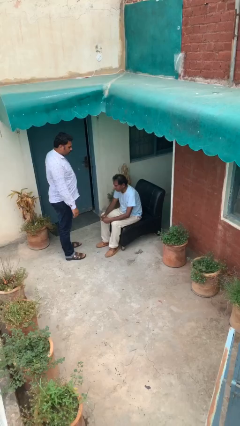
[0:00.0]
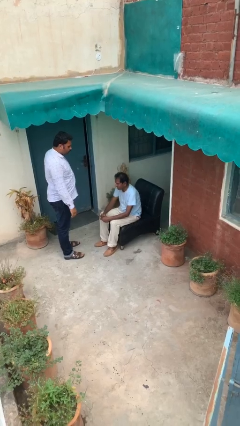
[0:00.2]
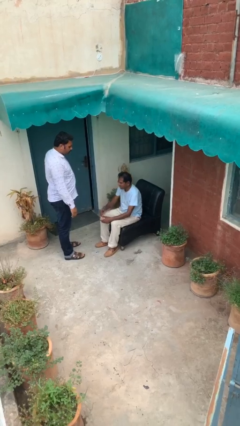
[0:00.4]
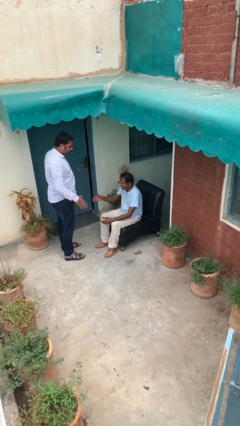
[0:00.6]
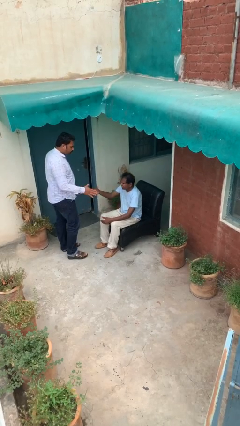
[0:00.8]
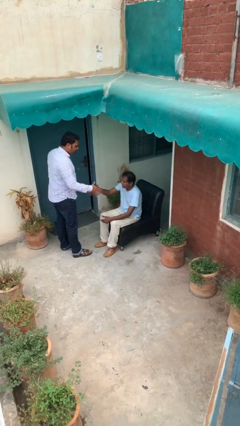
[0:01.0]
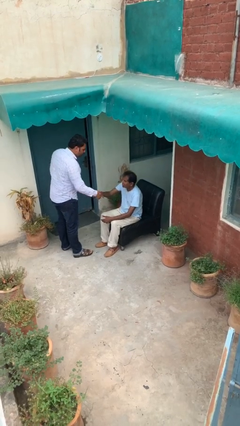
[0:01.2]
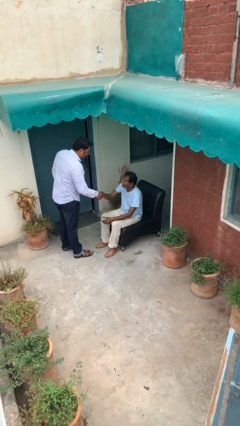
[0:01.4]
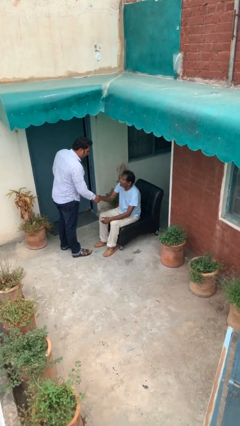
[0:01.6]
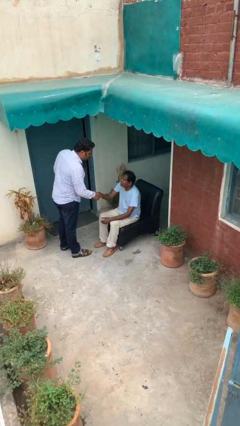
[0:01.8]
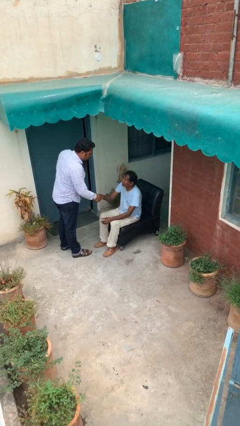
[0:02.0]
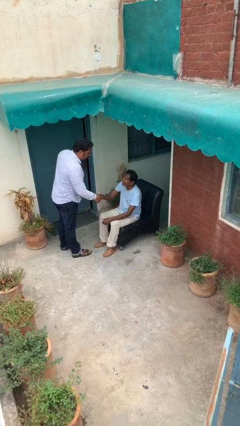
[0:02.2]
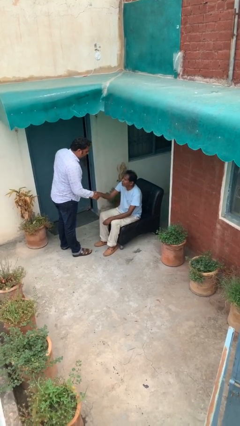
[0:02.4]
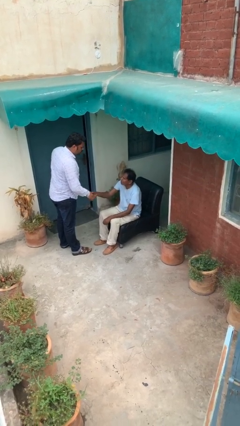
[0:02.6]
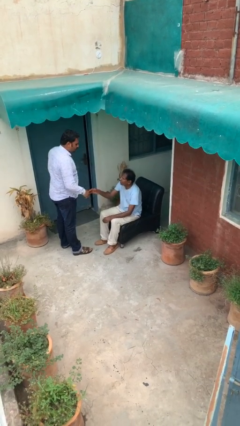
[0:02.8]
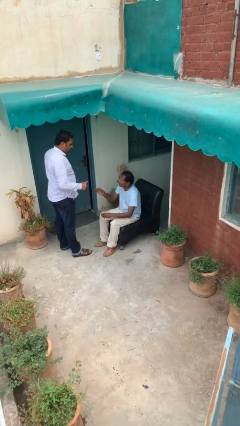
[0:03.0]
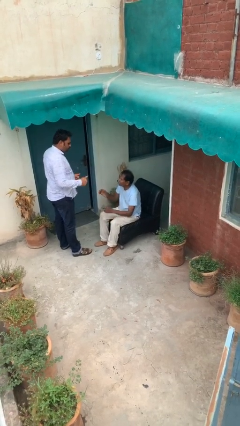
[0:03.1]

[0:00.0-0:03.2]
person shakes hand

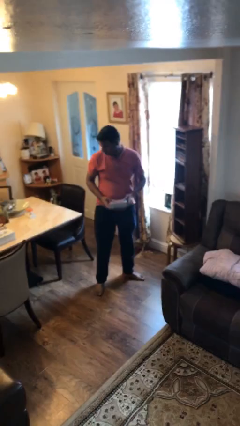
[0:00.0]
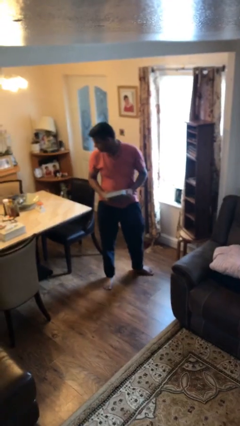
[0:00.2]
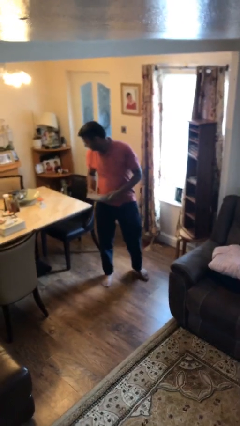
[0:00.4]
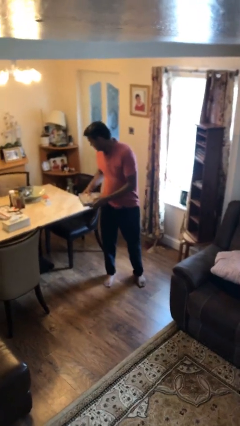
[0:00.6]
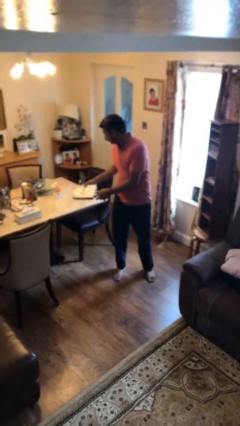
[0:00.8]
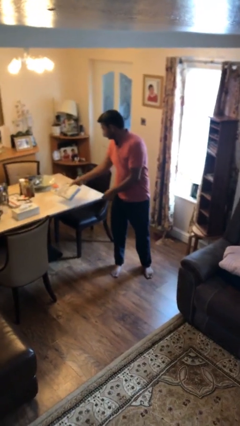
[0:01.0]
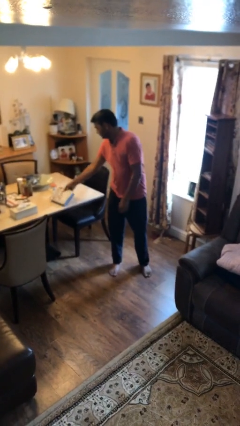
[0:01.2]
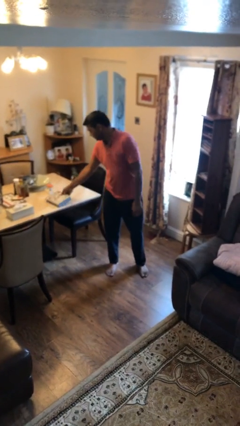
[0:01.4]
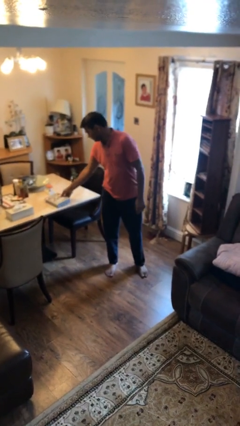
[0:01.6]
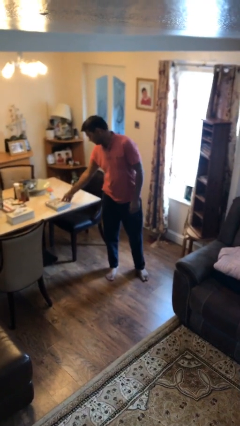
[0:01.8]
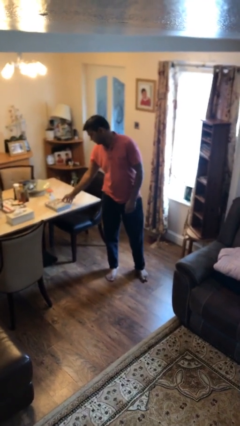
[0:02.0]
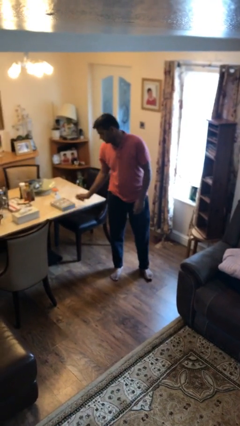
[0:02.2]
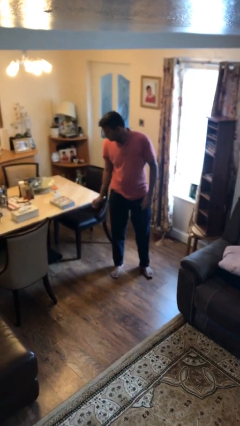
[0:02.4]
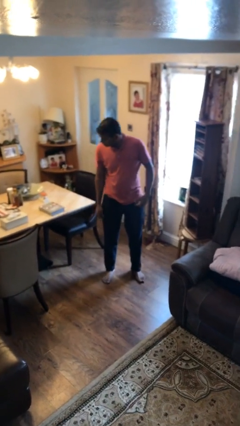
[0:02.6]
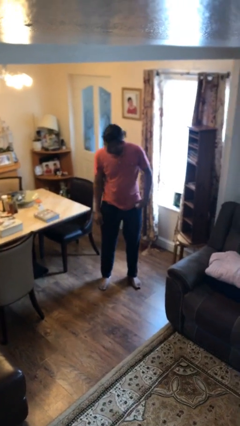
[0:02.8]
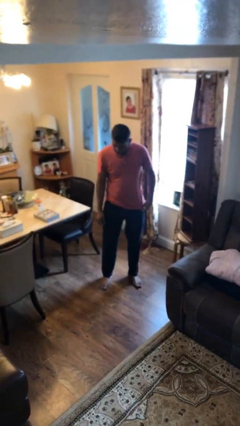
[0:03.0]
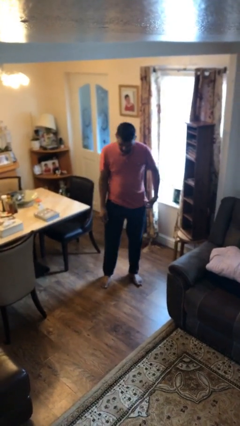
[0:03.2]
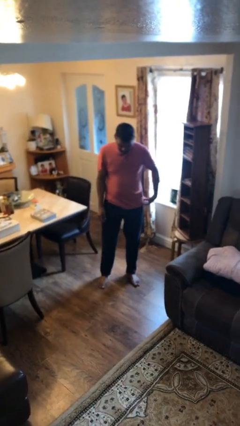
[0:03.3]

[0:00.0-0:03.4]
person puts down object on table

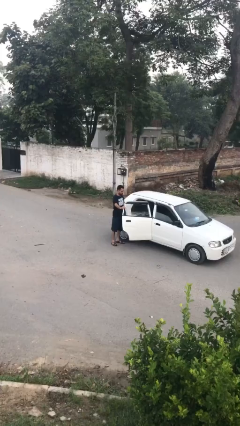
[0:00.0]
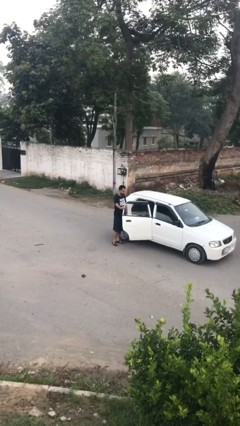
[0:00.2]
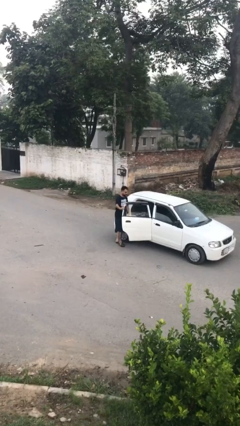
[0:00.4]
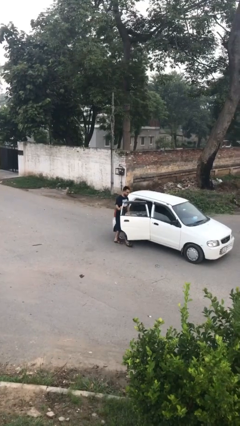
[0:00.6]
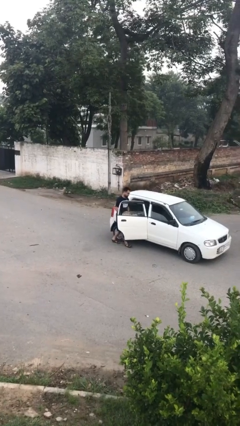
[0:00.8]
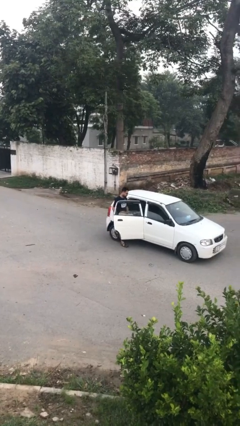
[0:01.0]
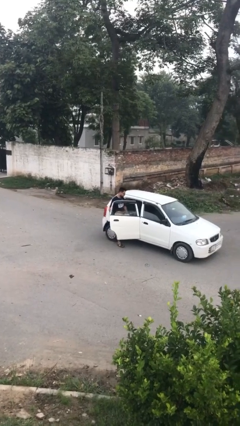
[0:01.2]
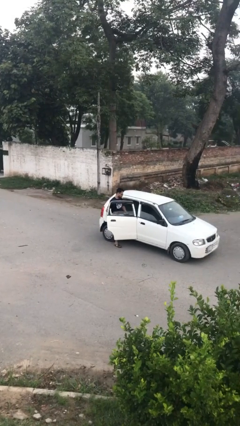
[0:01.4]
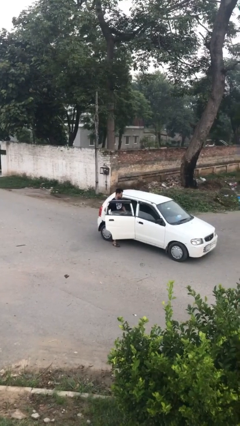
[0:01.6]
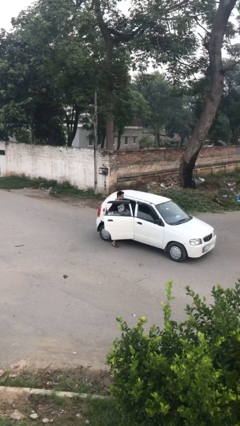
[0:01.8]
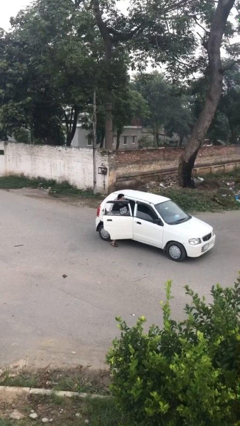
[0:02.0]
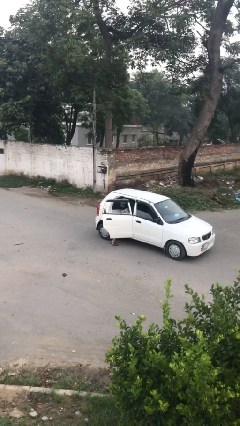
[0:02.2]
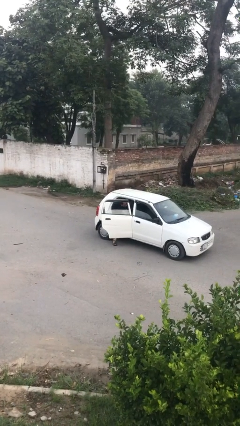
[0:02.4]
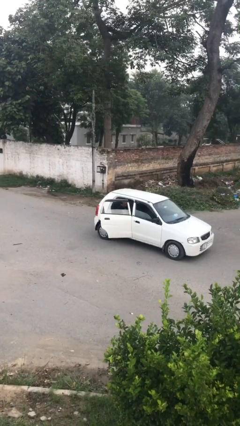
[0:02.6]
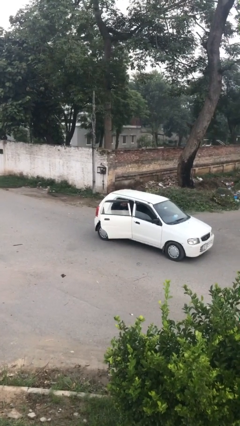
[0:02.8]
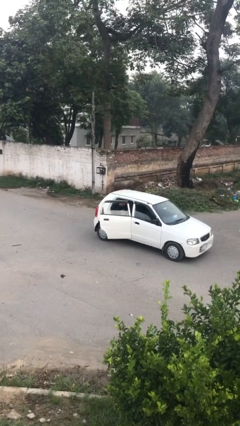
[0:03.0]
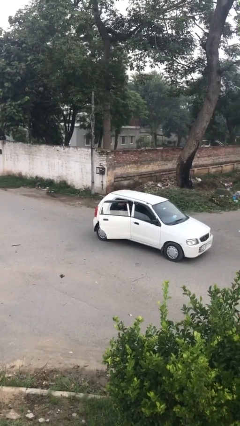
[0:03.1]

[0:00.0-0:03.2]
person enters car

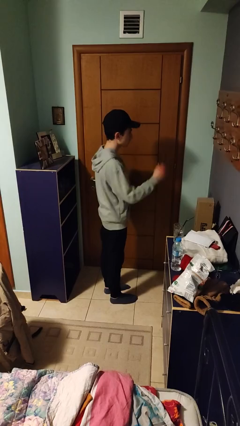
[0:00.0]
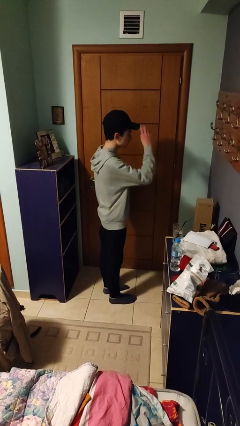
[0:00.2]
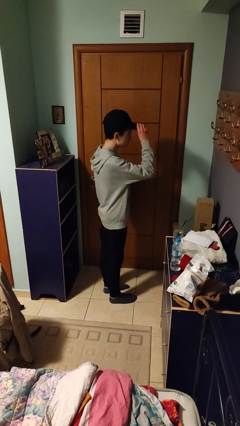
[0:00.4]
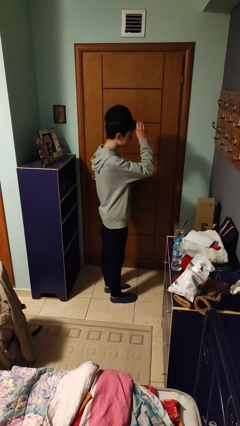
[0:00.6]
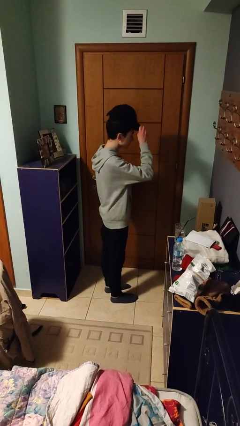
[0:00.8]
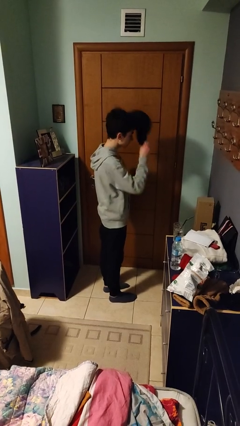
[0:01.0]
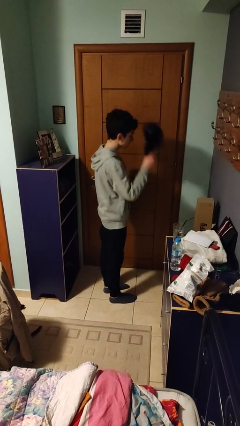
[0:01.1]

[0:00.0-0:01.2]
person takes off hat

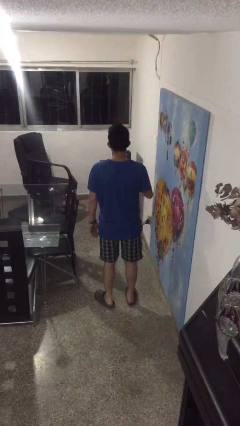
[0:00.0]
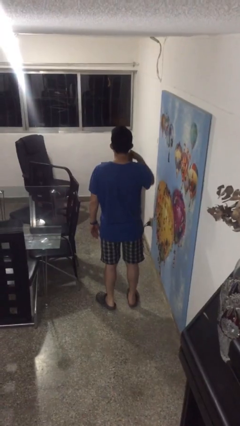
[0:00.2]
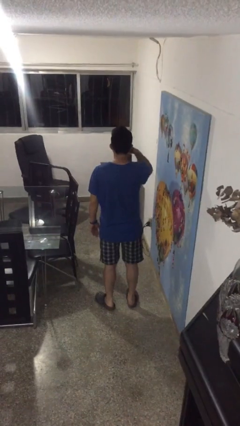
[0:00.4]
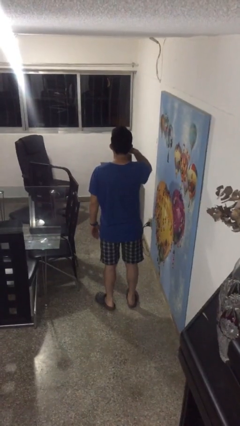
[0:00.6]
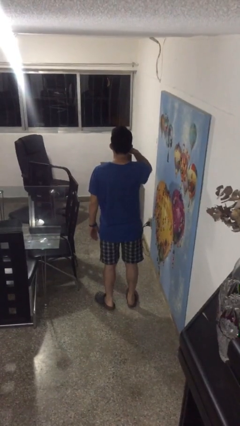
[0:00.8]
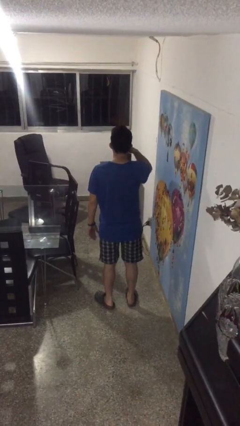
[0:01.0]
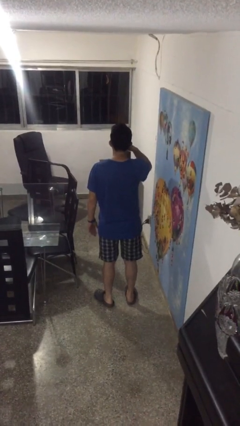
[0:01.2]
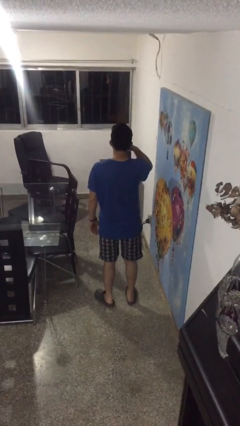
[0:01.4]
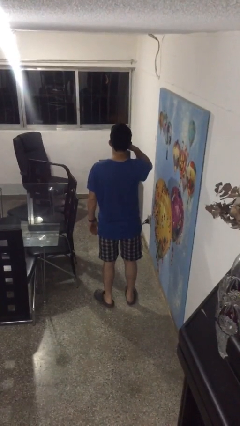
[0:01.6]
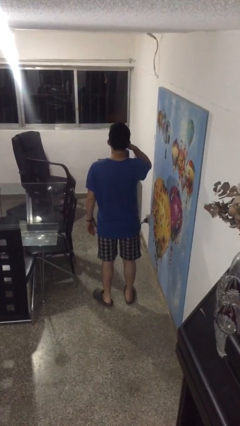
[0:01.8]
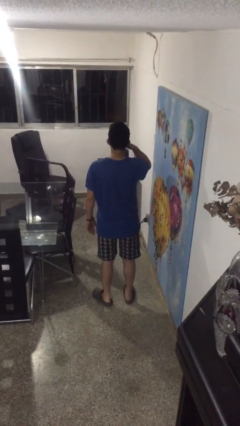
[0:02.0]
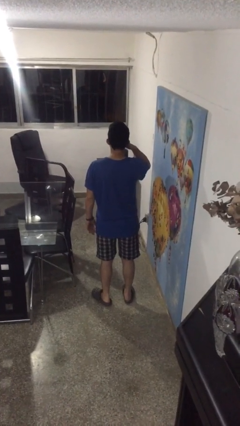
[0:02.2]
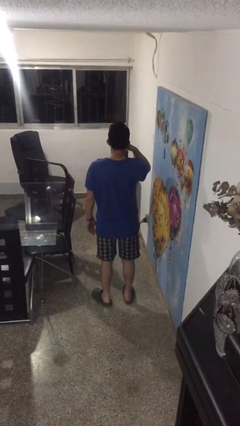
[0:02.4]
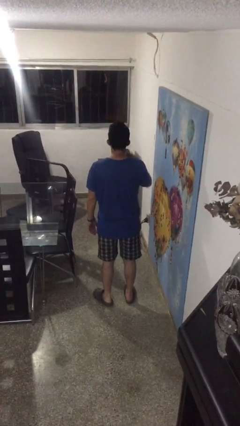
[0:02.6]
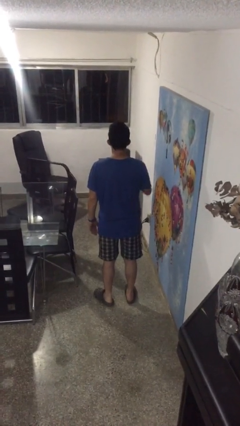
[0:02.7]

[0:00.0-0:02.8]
person gestures call me

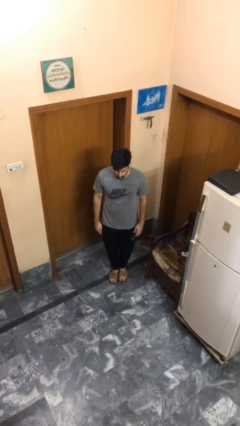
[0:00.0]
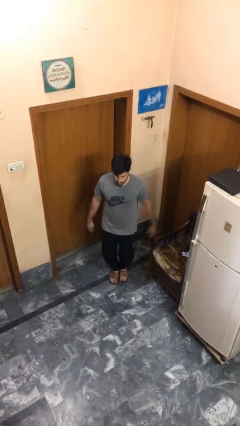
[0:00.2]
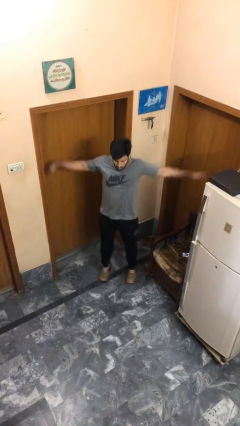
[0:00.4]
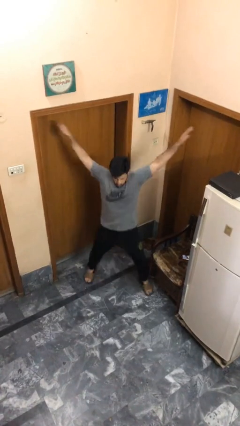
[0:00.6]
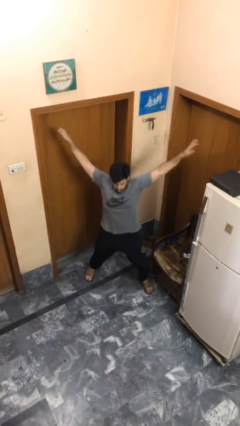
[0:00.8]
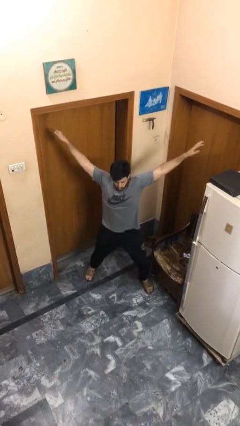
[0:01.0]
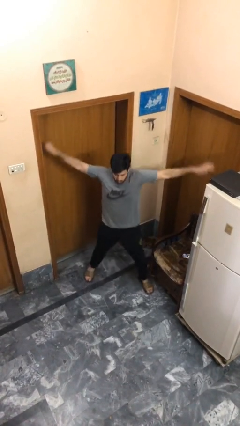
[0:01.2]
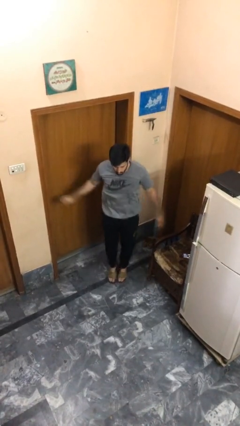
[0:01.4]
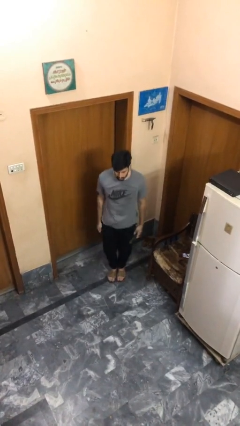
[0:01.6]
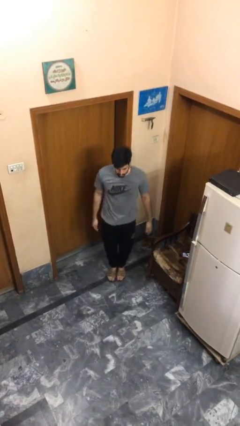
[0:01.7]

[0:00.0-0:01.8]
person exercises with jumping jacks

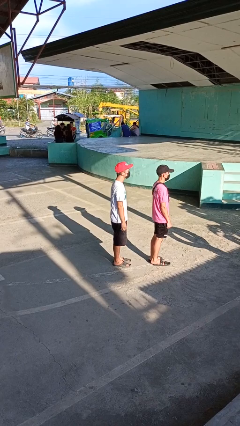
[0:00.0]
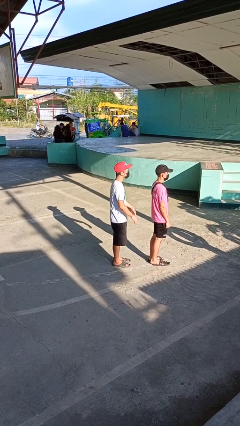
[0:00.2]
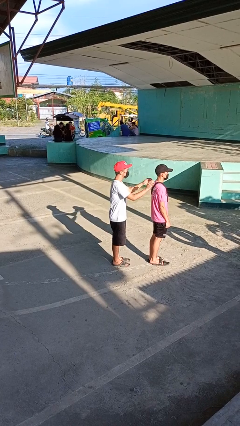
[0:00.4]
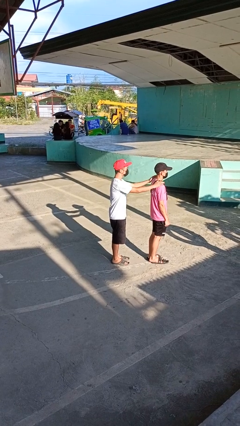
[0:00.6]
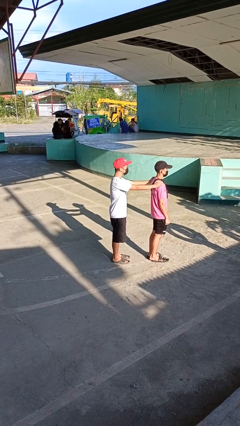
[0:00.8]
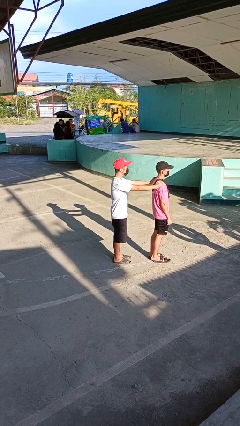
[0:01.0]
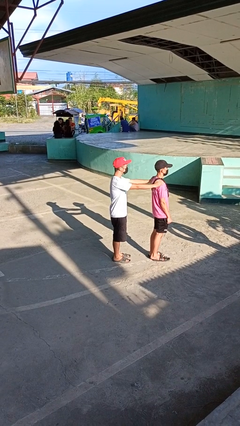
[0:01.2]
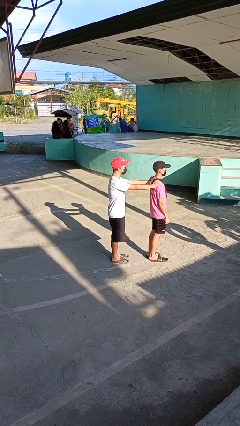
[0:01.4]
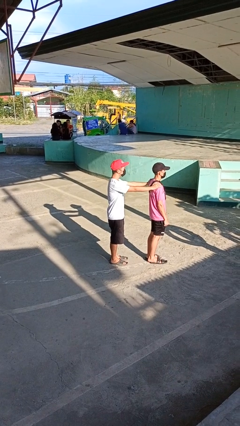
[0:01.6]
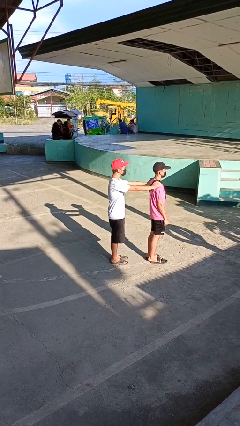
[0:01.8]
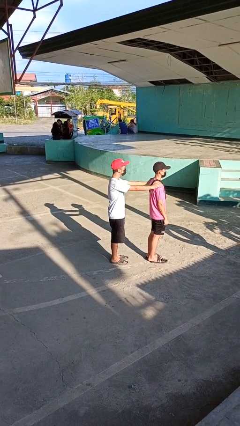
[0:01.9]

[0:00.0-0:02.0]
person grabs person by shoulder
